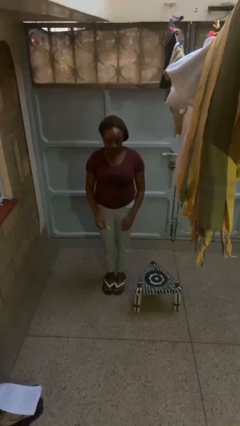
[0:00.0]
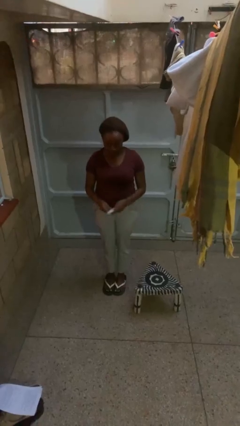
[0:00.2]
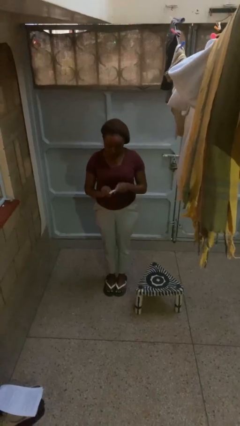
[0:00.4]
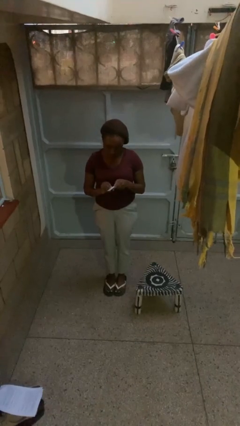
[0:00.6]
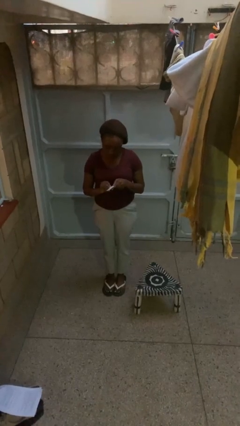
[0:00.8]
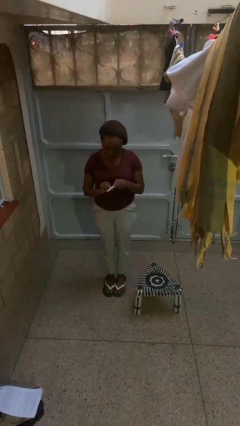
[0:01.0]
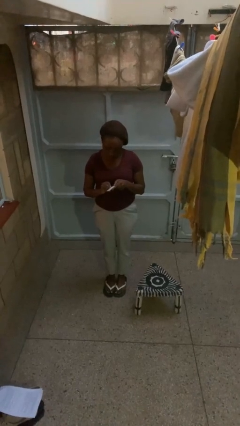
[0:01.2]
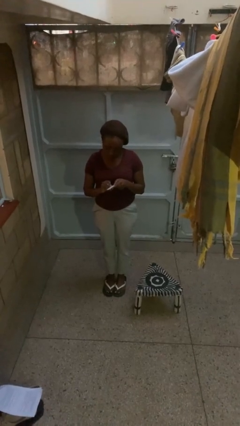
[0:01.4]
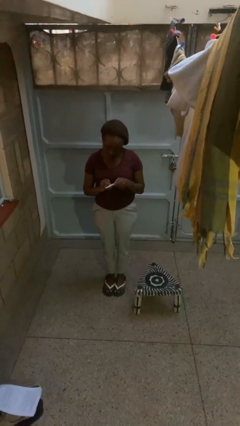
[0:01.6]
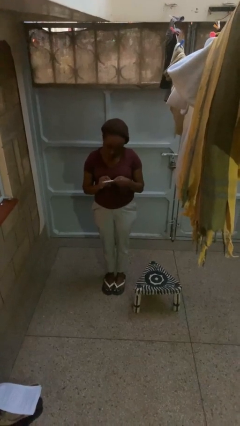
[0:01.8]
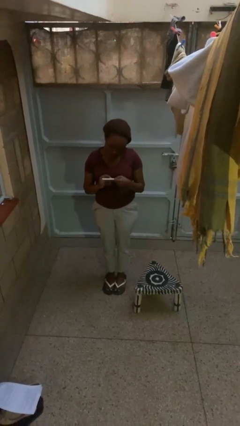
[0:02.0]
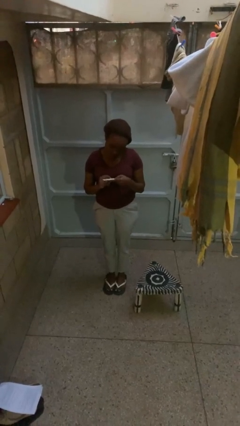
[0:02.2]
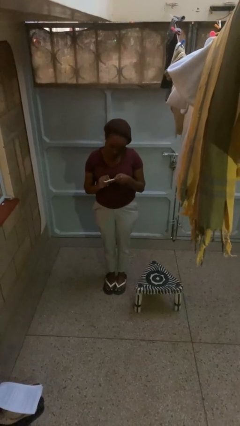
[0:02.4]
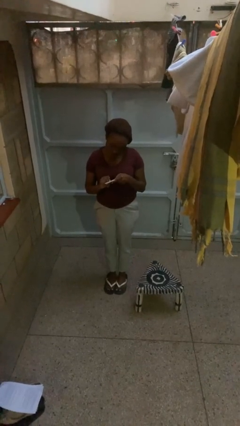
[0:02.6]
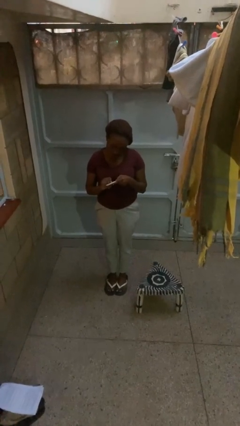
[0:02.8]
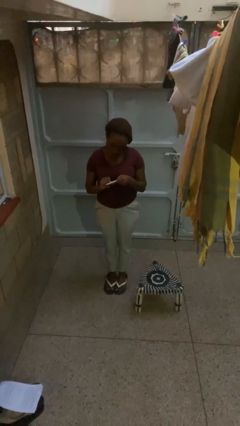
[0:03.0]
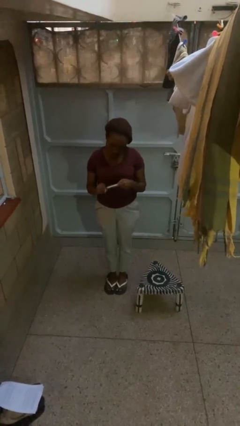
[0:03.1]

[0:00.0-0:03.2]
person files fingernails

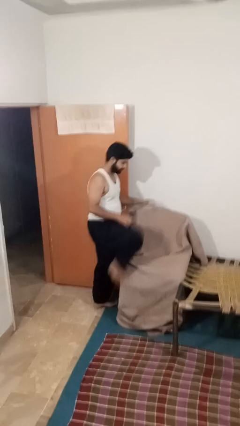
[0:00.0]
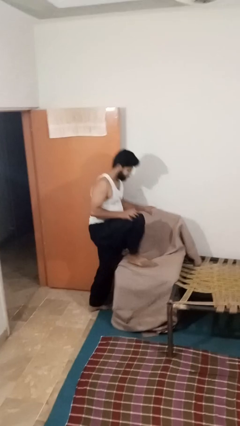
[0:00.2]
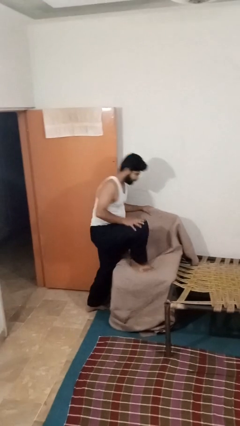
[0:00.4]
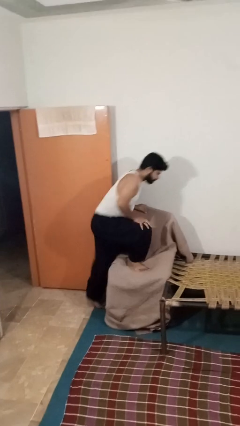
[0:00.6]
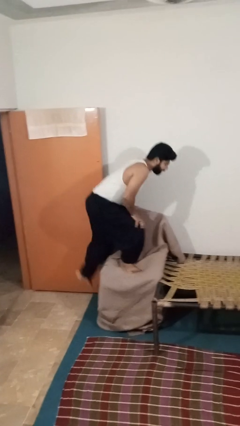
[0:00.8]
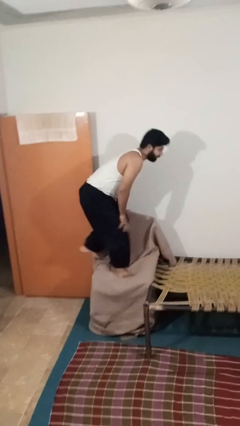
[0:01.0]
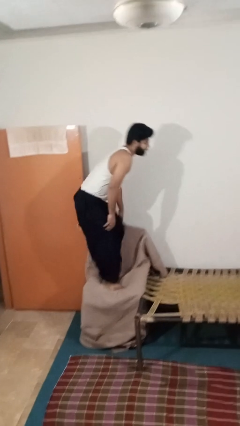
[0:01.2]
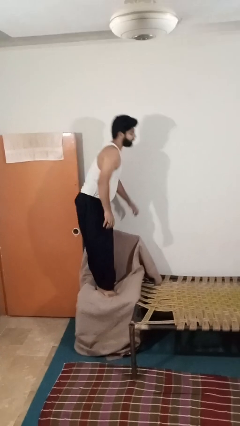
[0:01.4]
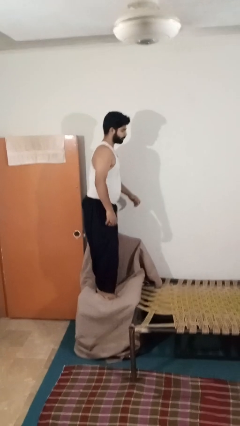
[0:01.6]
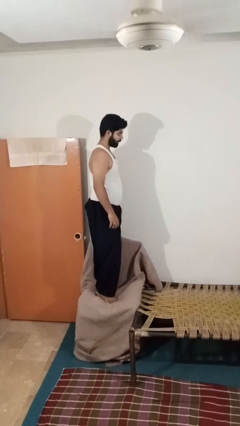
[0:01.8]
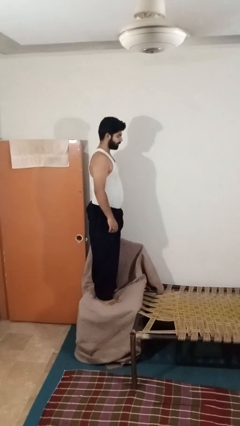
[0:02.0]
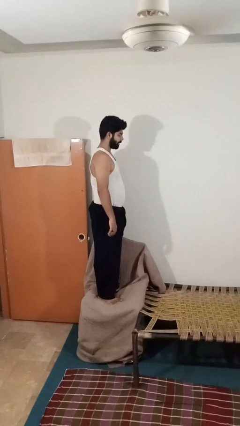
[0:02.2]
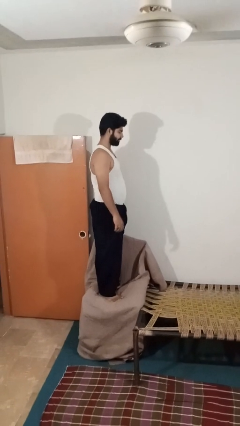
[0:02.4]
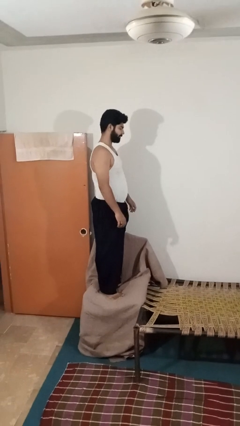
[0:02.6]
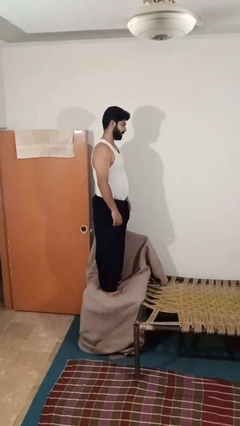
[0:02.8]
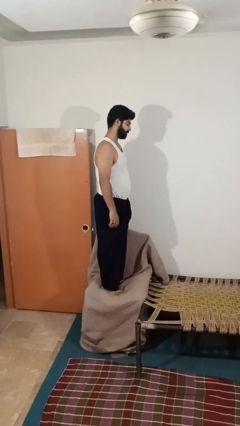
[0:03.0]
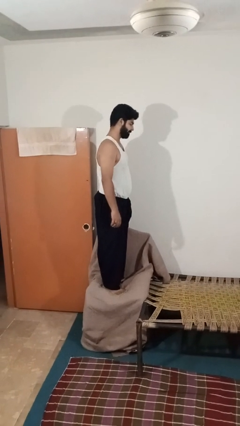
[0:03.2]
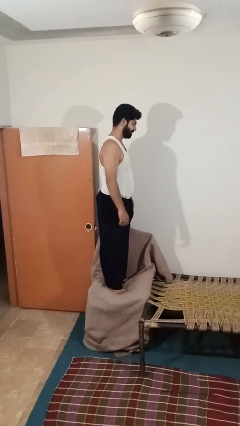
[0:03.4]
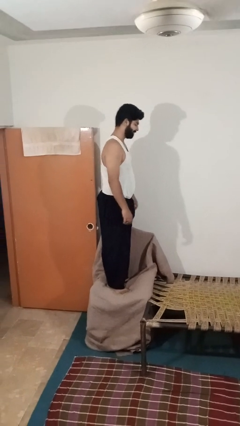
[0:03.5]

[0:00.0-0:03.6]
person climbs on couch

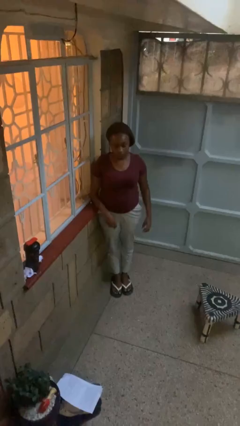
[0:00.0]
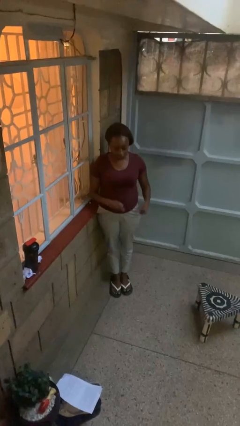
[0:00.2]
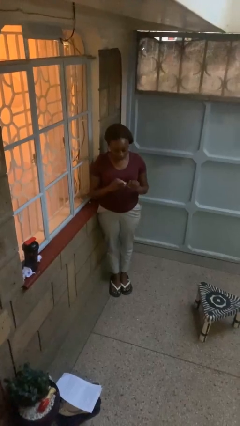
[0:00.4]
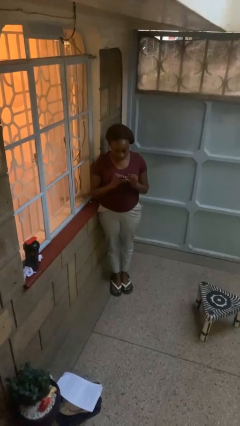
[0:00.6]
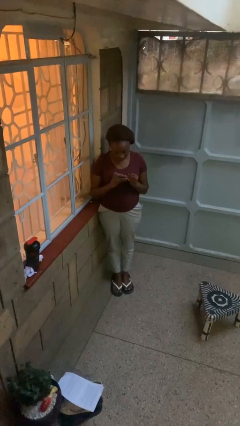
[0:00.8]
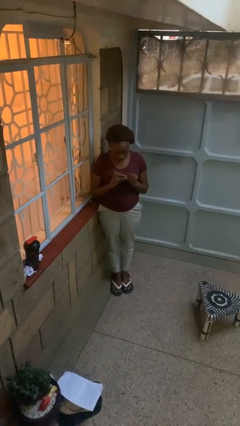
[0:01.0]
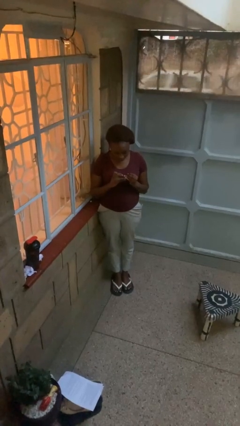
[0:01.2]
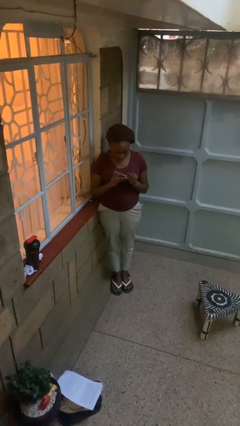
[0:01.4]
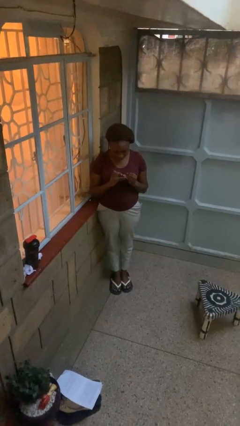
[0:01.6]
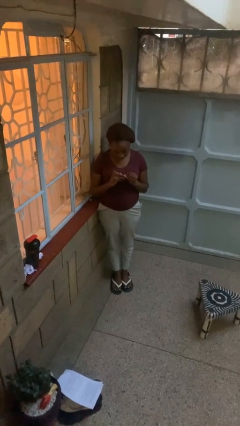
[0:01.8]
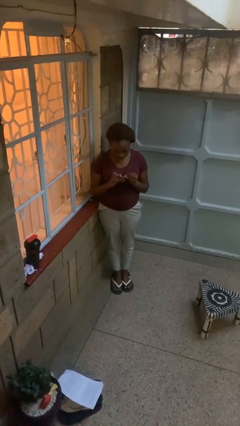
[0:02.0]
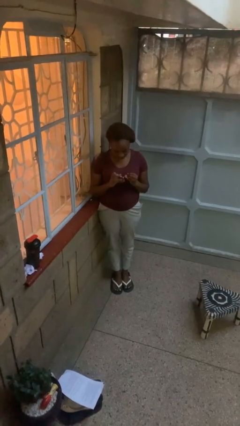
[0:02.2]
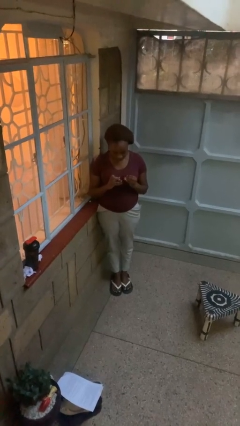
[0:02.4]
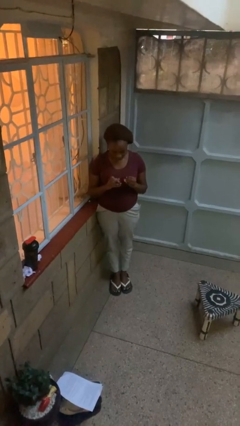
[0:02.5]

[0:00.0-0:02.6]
person clips fingernails

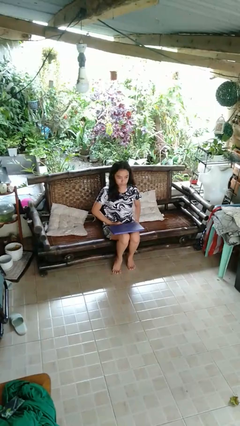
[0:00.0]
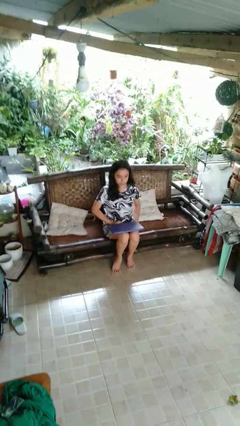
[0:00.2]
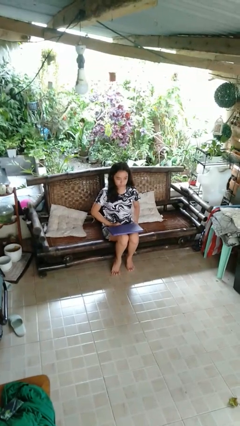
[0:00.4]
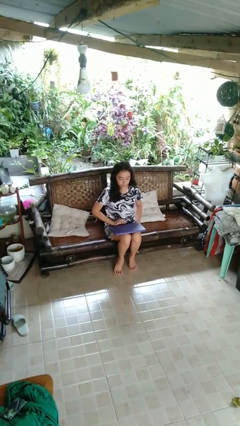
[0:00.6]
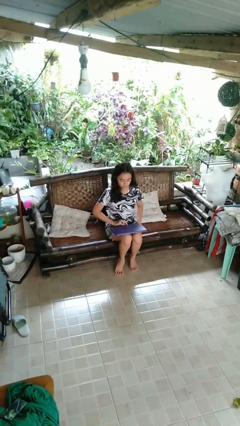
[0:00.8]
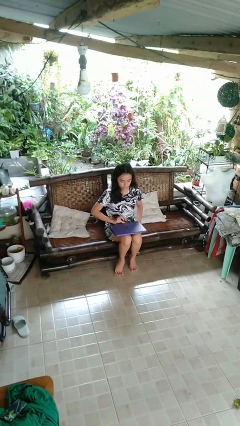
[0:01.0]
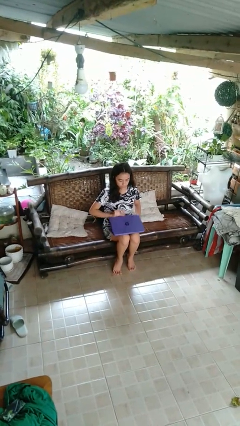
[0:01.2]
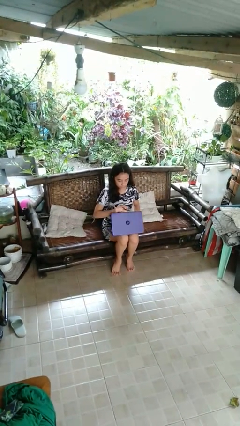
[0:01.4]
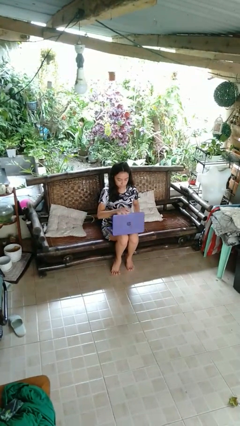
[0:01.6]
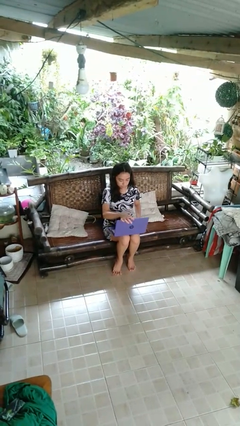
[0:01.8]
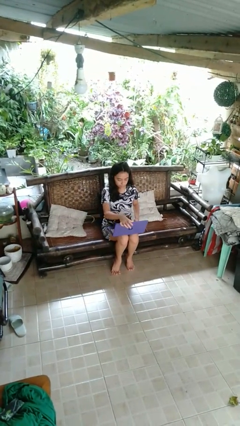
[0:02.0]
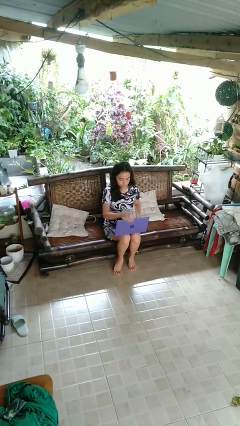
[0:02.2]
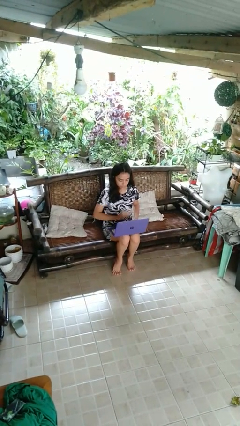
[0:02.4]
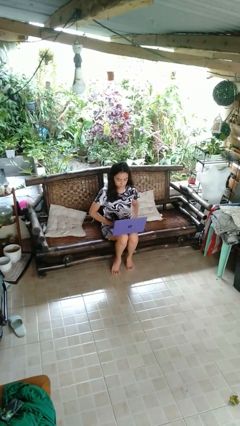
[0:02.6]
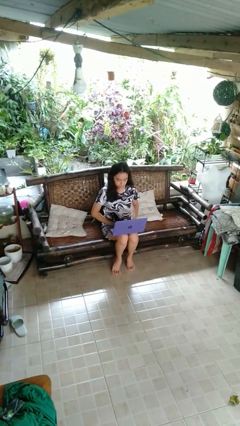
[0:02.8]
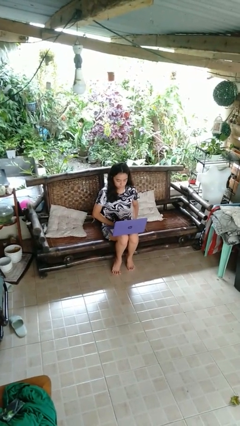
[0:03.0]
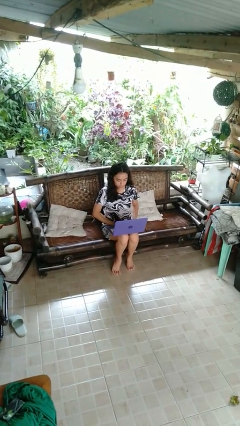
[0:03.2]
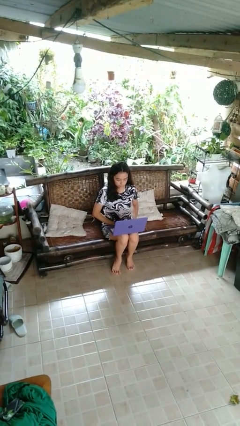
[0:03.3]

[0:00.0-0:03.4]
person opens laptop

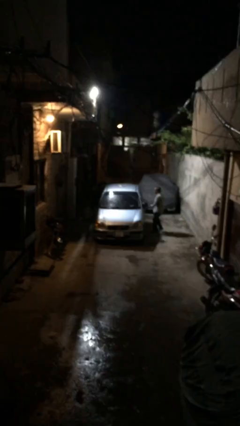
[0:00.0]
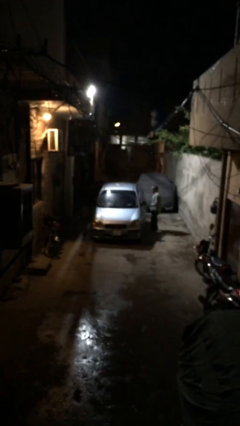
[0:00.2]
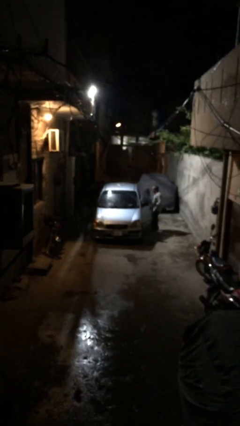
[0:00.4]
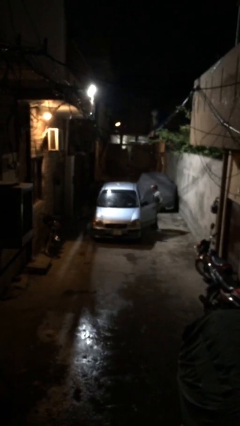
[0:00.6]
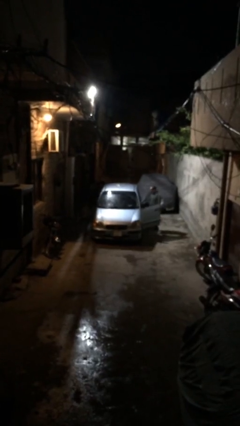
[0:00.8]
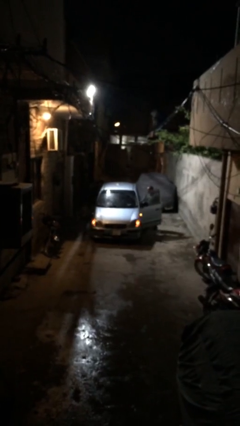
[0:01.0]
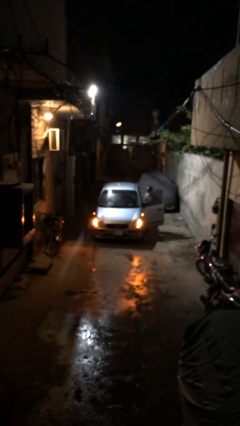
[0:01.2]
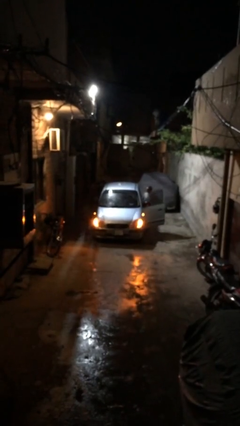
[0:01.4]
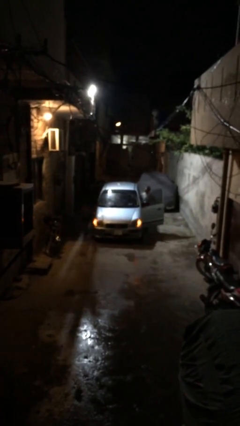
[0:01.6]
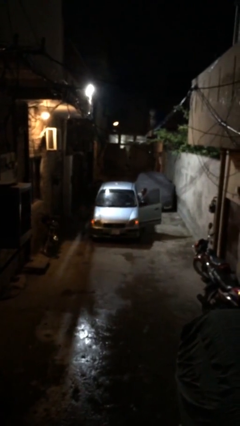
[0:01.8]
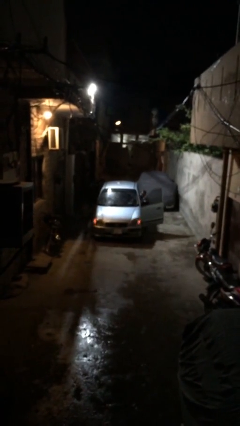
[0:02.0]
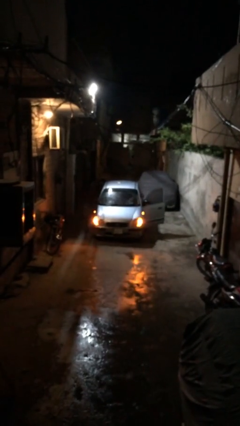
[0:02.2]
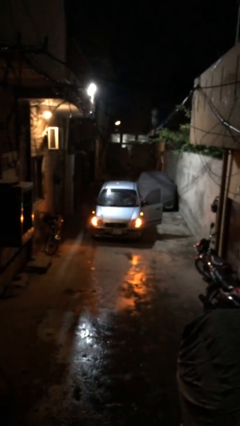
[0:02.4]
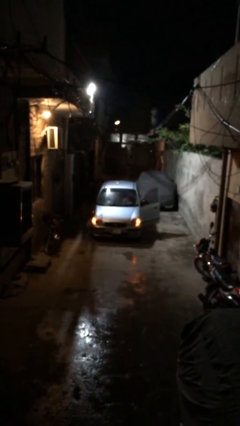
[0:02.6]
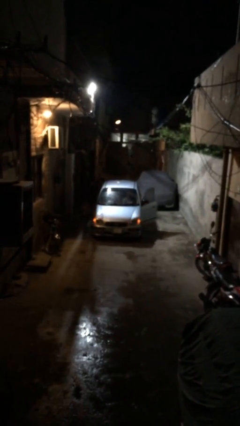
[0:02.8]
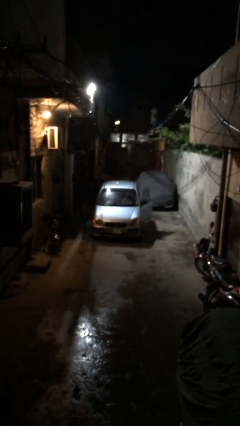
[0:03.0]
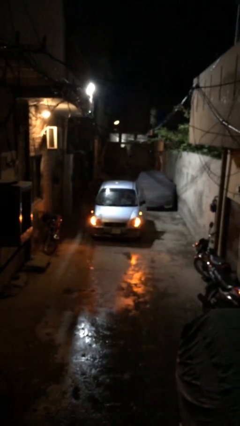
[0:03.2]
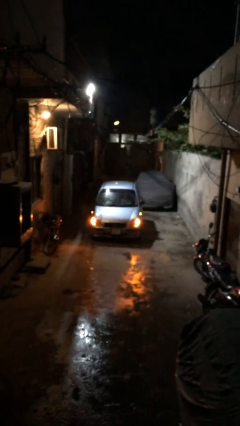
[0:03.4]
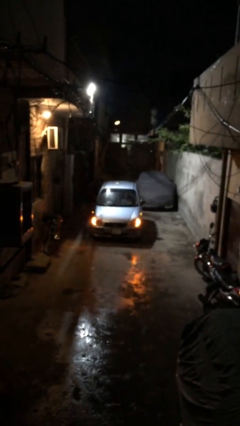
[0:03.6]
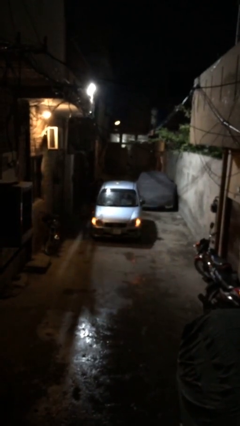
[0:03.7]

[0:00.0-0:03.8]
car picks up person

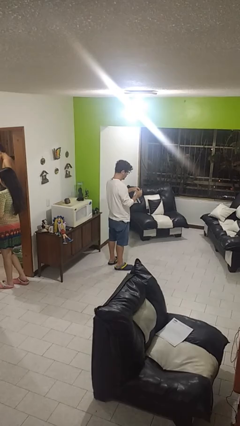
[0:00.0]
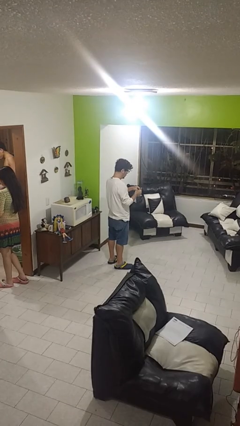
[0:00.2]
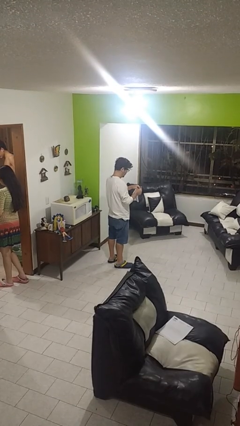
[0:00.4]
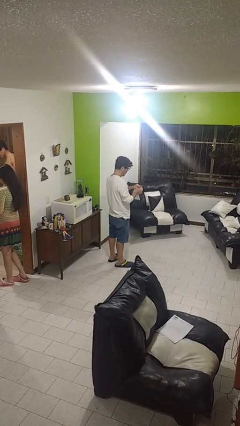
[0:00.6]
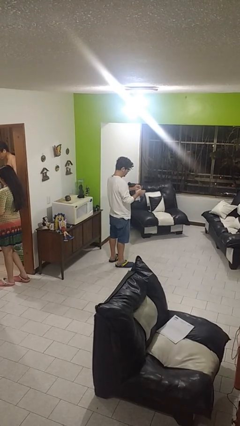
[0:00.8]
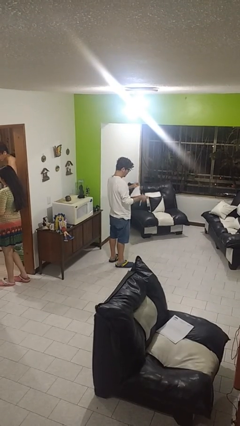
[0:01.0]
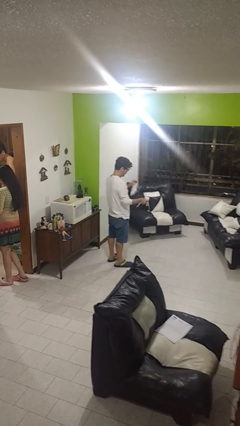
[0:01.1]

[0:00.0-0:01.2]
person tears paper
